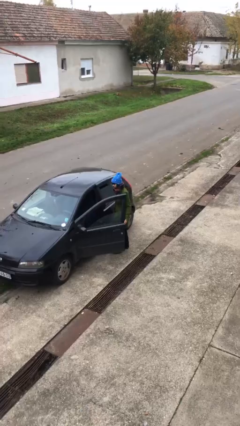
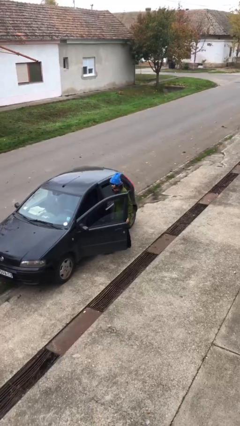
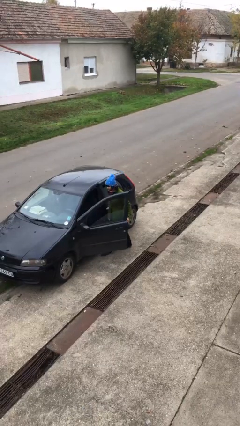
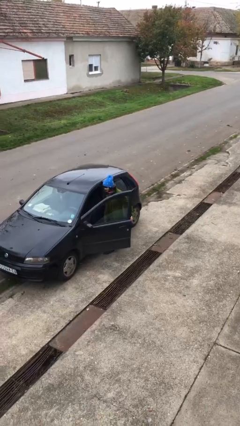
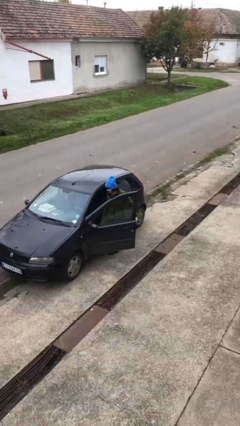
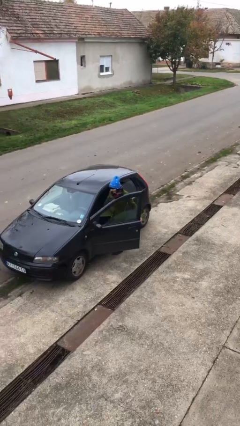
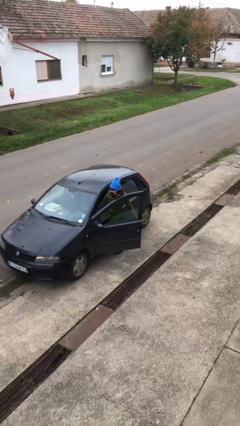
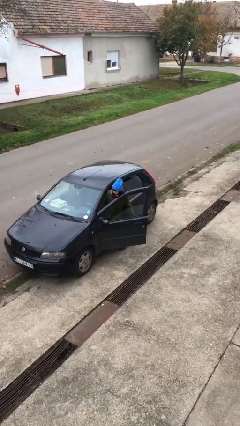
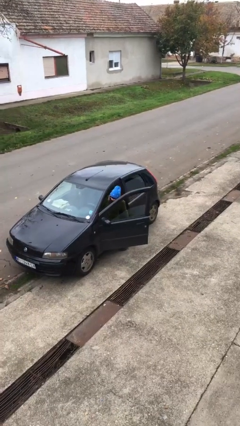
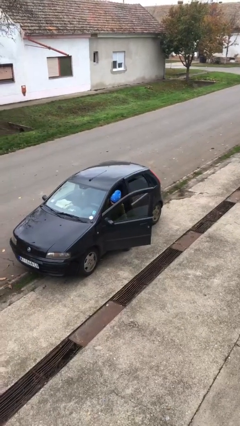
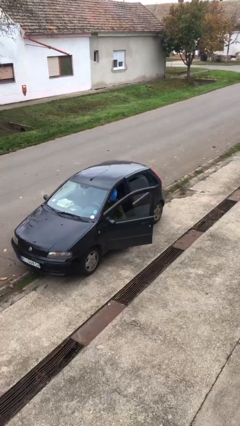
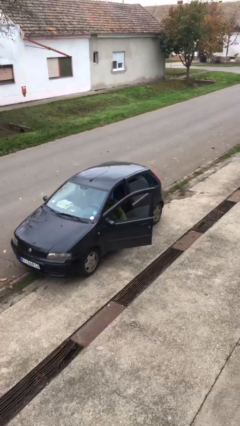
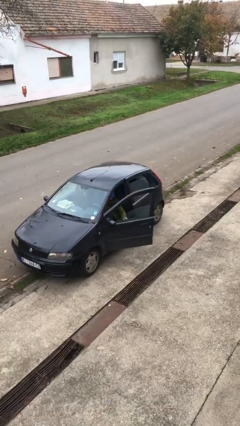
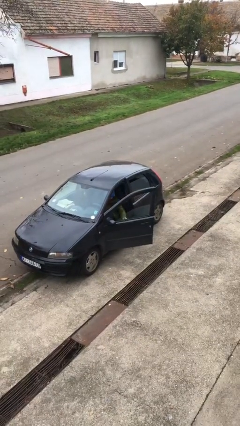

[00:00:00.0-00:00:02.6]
person enters car

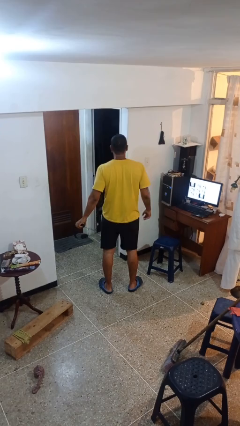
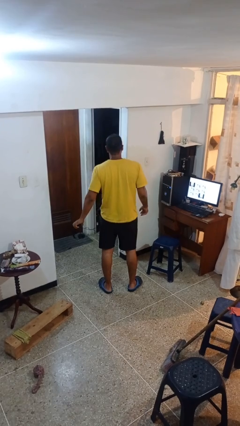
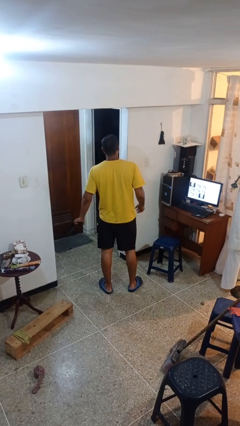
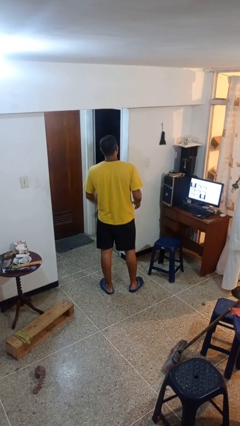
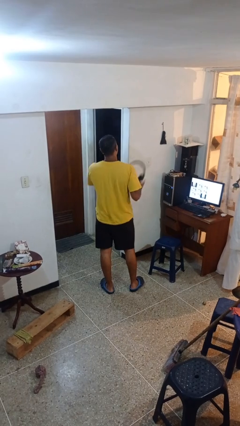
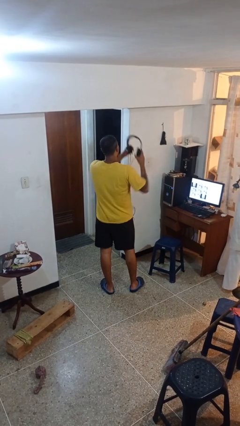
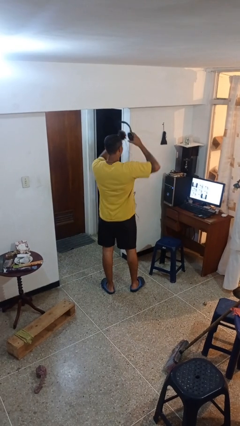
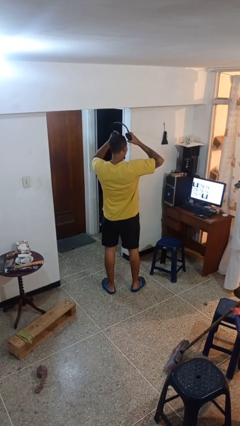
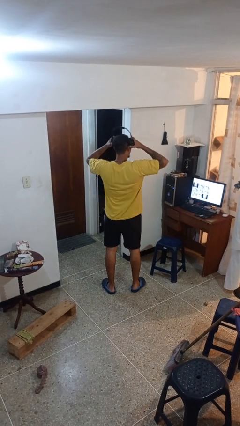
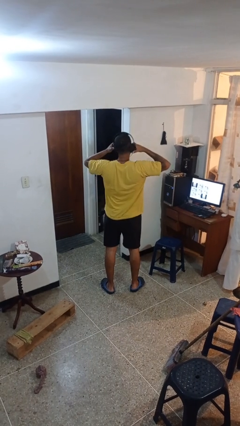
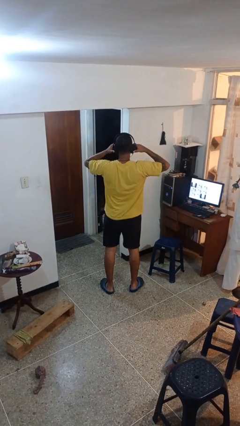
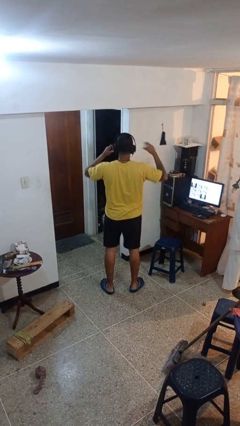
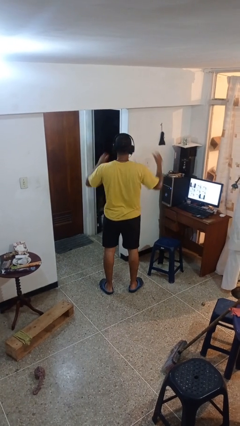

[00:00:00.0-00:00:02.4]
person puts on headphones

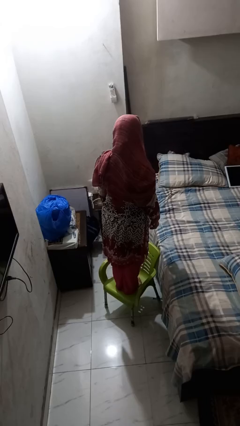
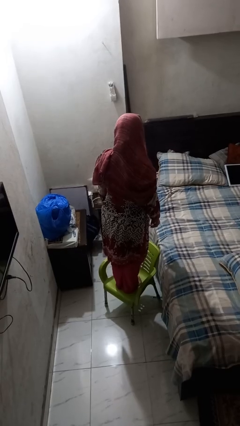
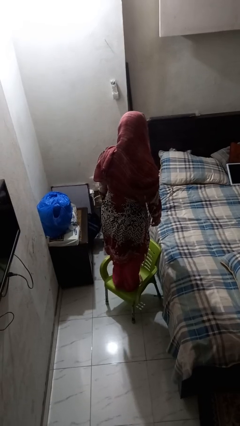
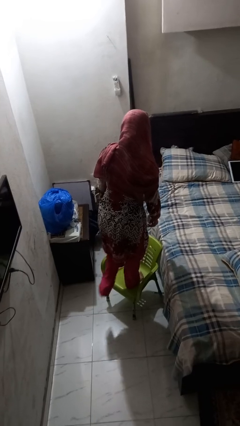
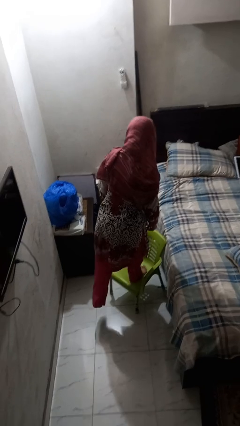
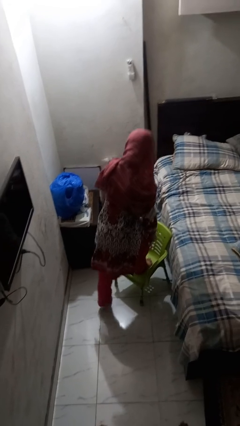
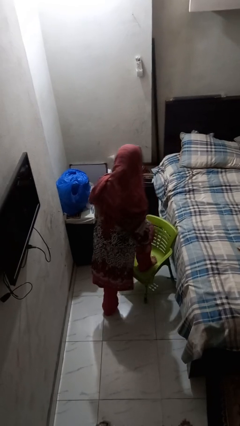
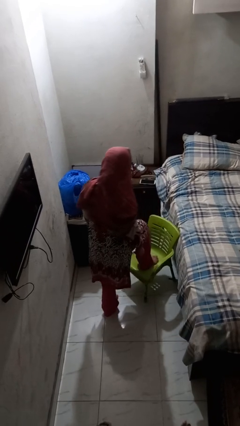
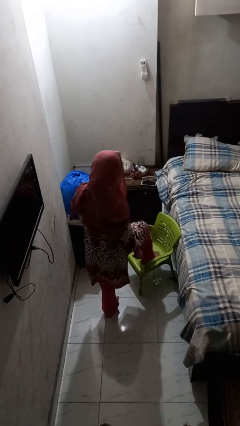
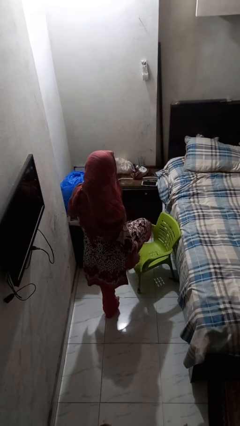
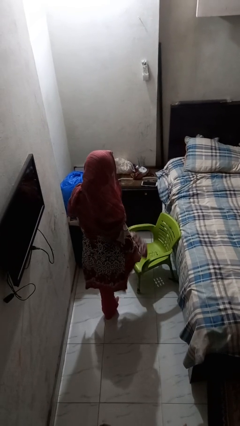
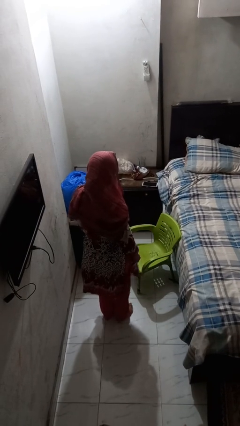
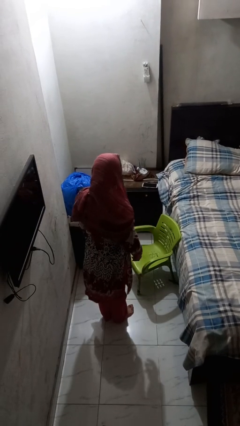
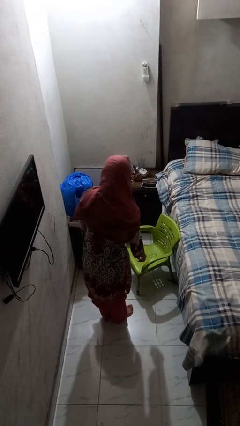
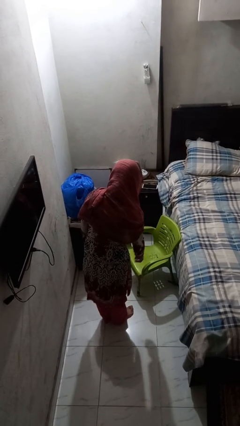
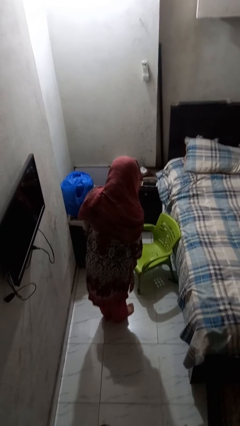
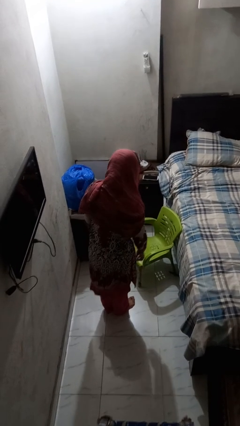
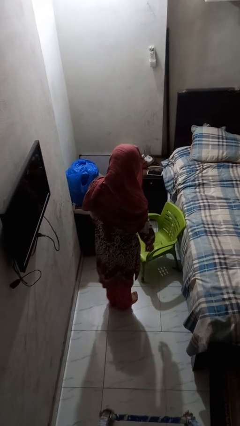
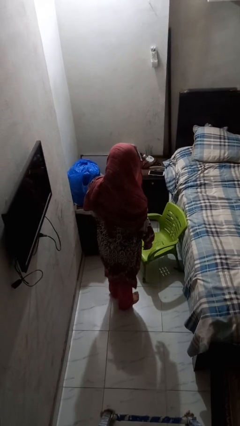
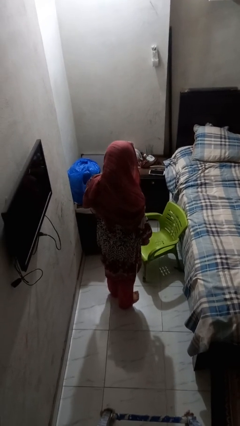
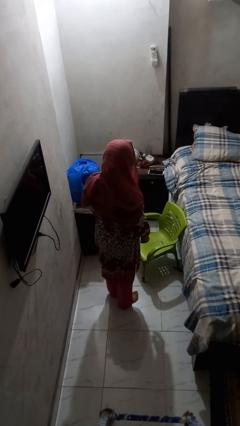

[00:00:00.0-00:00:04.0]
person climbs off chair

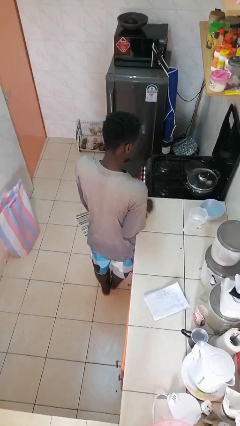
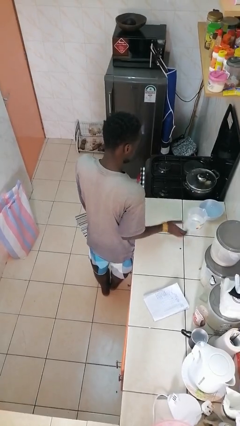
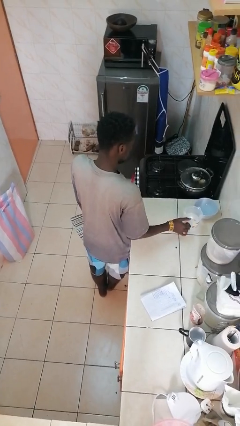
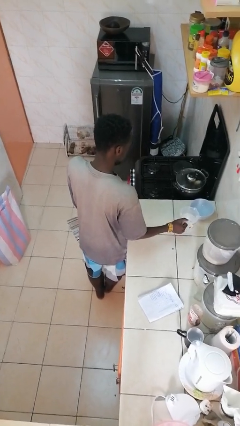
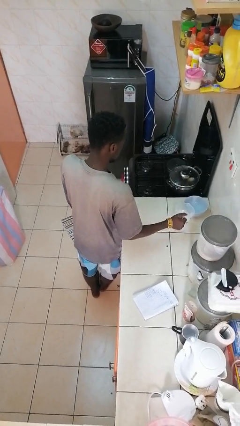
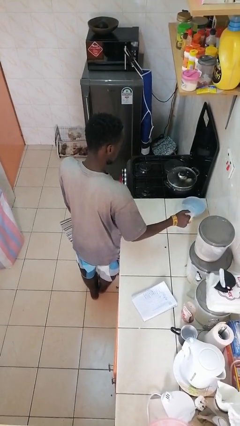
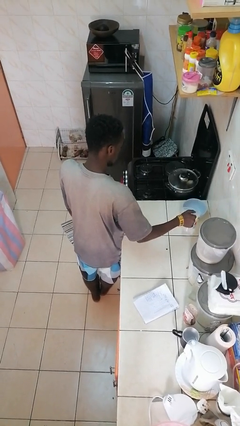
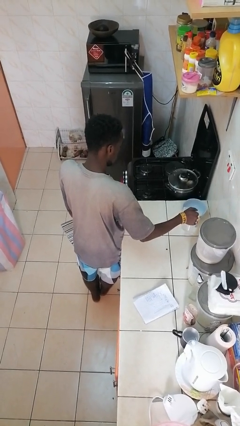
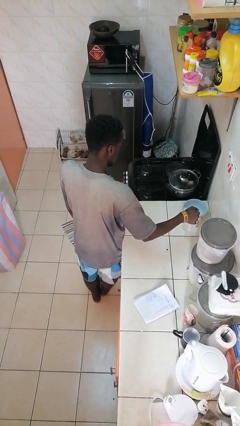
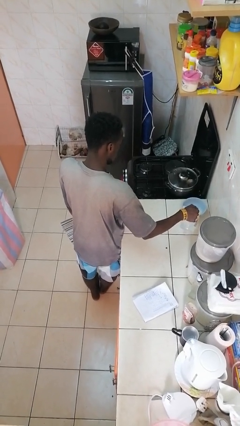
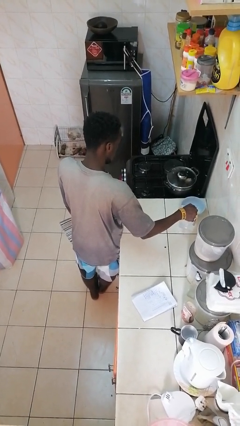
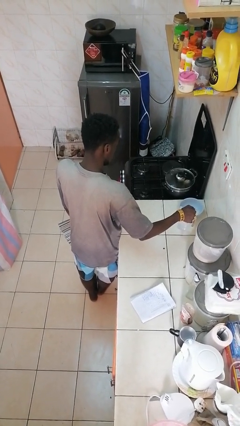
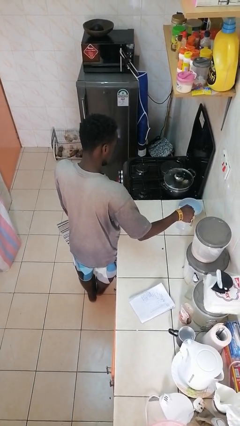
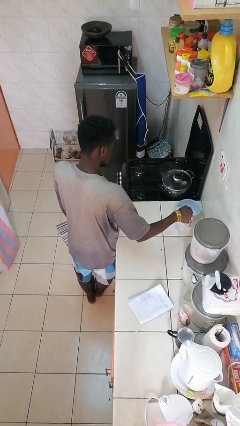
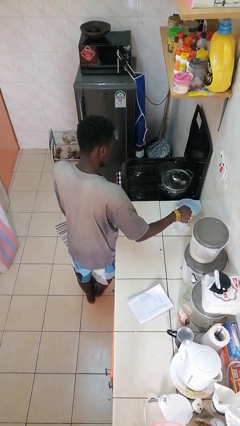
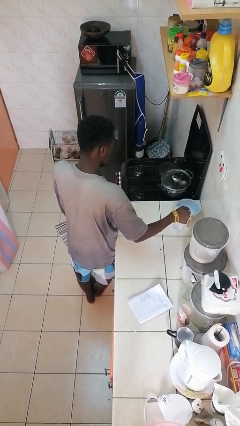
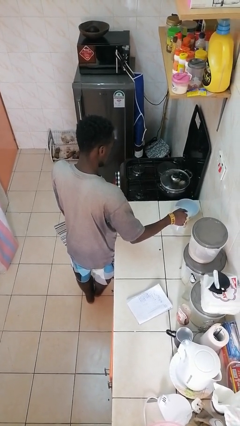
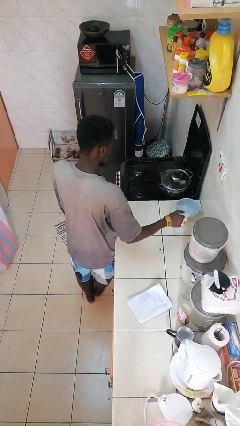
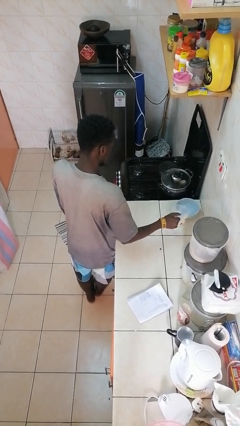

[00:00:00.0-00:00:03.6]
person pours into bowl

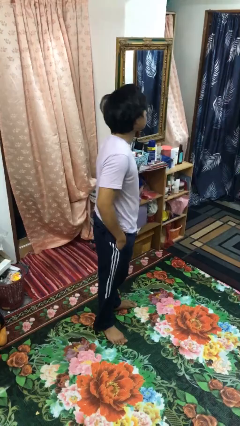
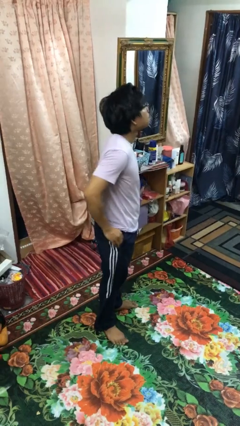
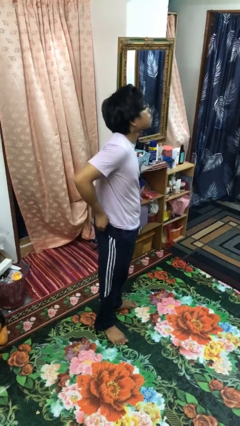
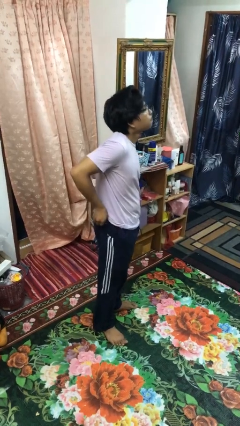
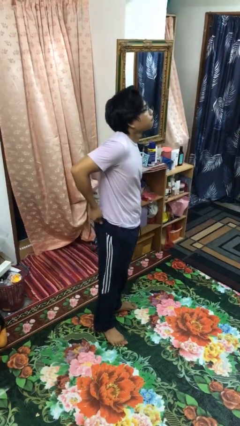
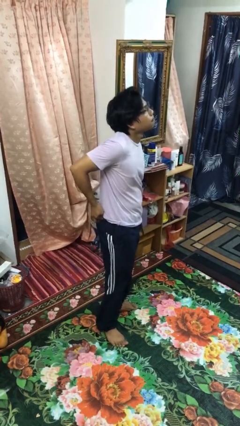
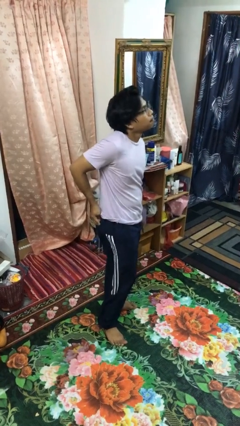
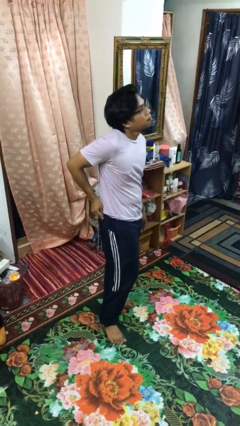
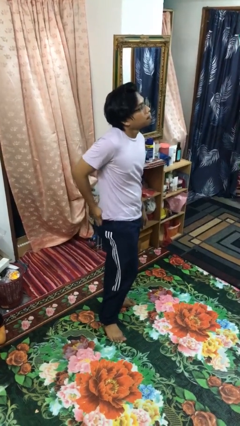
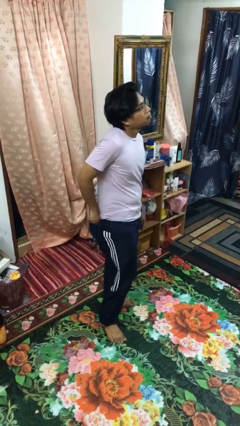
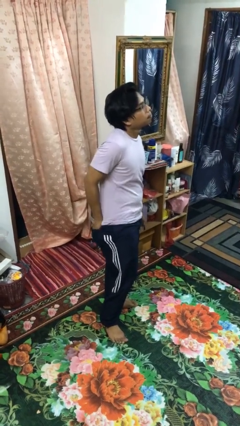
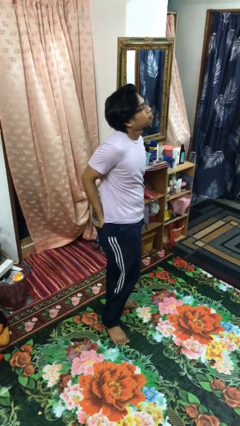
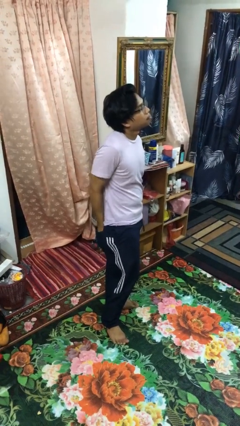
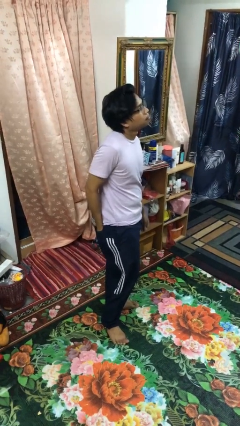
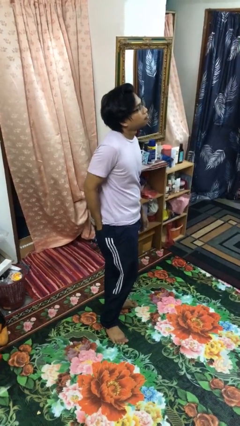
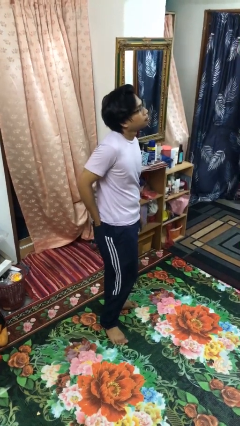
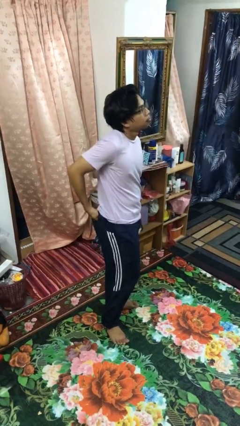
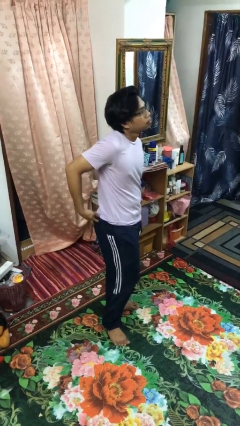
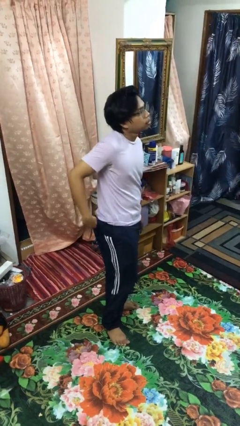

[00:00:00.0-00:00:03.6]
person puts hands in back pockets

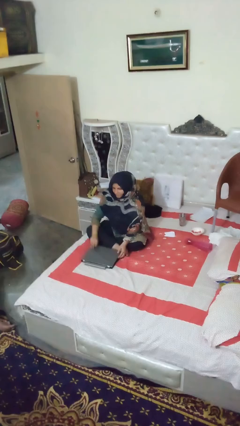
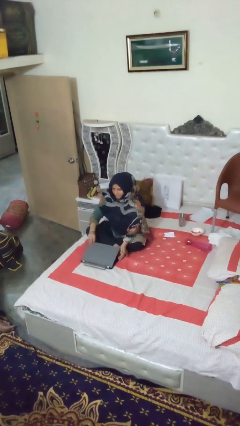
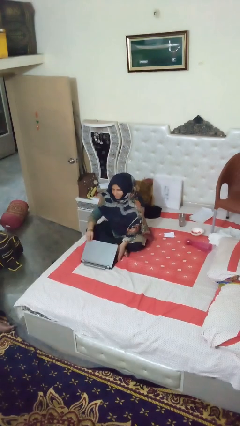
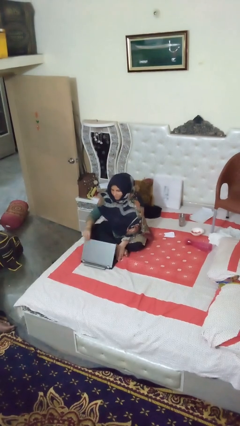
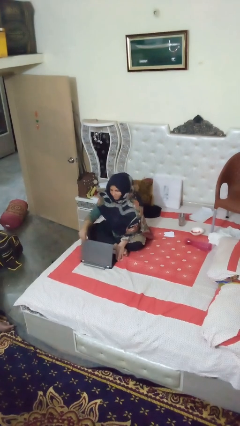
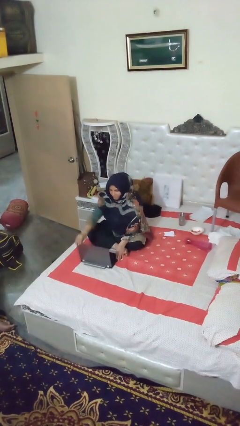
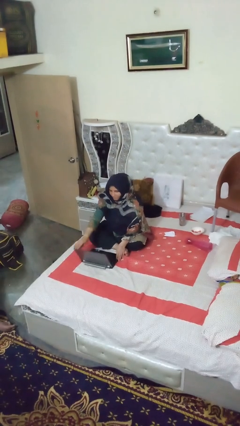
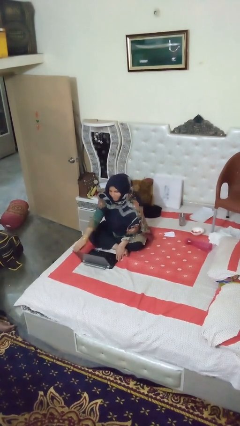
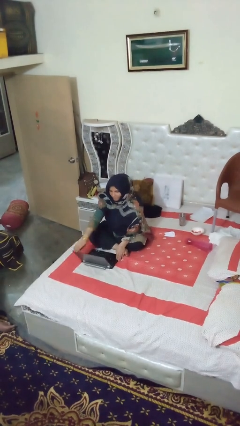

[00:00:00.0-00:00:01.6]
person opens laptop
